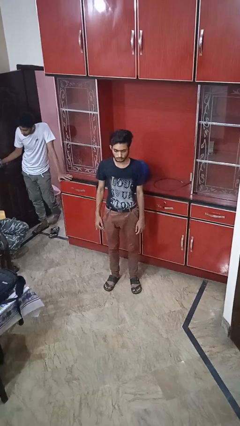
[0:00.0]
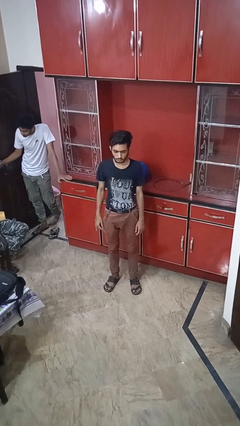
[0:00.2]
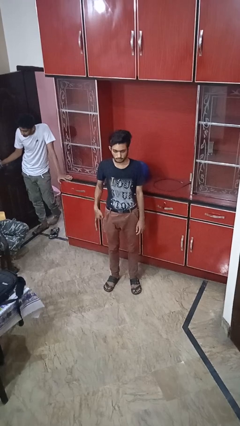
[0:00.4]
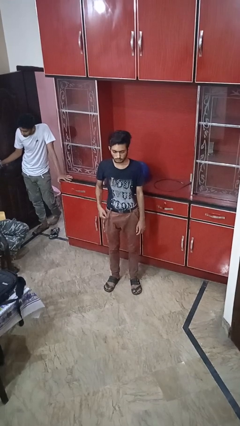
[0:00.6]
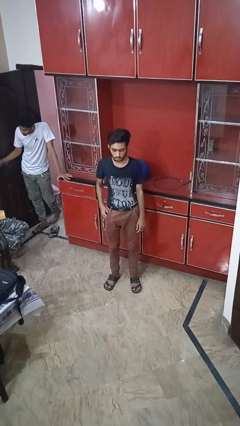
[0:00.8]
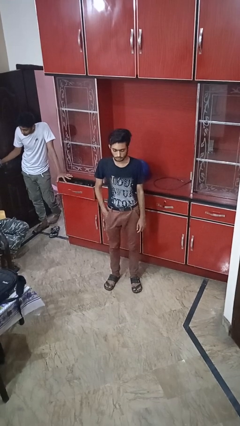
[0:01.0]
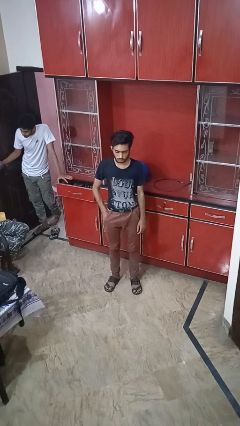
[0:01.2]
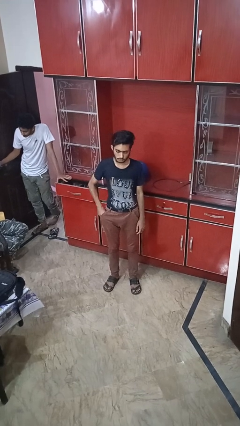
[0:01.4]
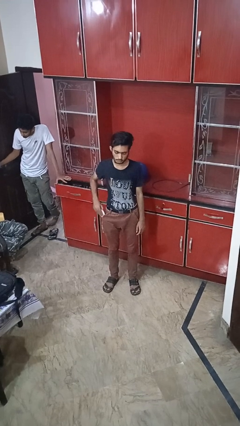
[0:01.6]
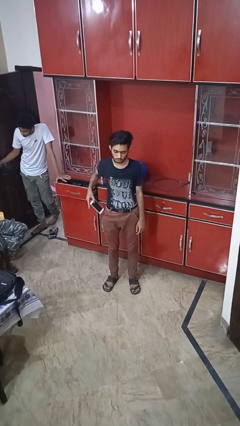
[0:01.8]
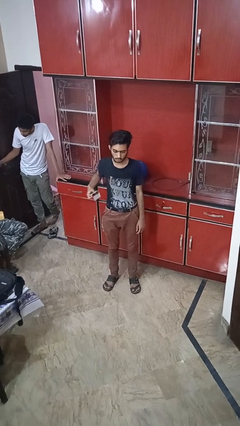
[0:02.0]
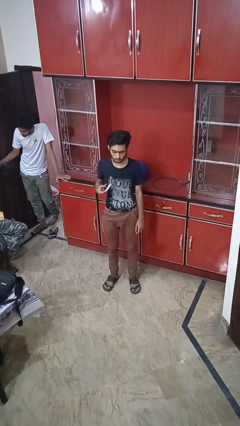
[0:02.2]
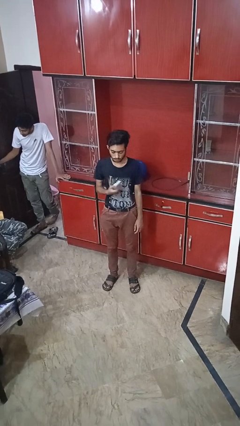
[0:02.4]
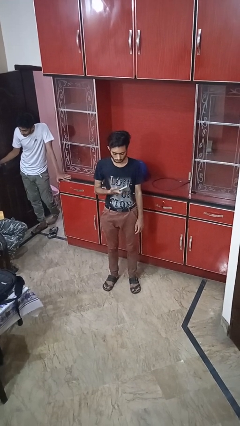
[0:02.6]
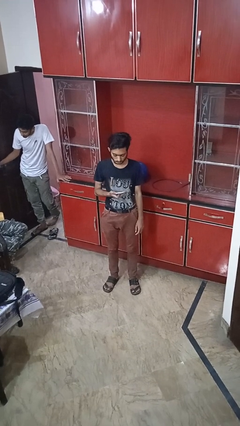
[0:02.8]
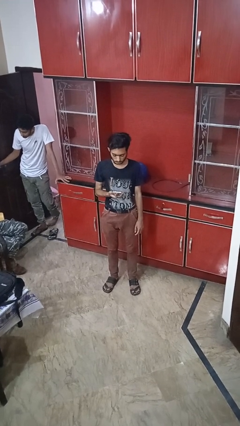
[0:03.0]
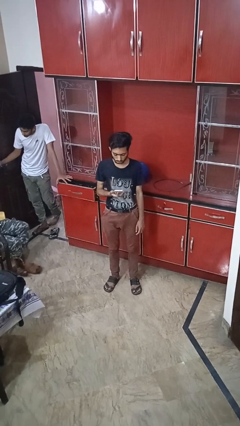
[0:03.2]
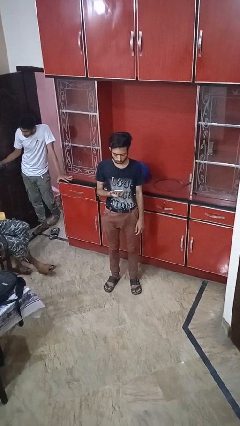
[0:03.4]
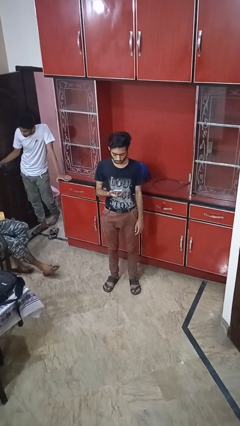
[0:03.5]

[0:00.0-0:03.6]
person takes phone from pocket

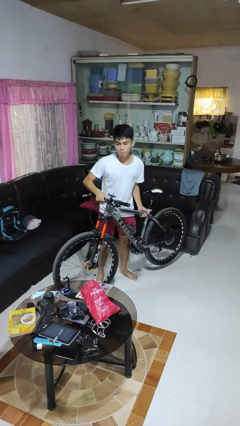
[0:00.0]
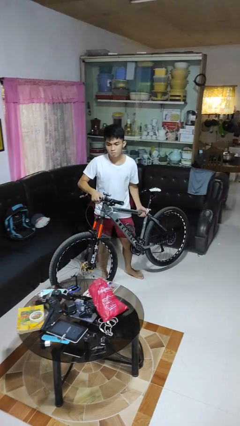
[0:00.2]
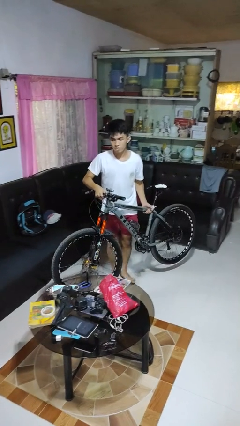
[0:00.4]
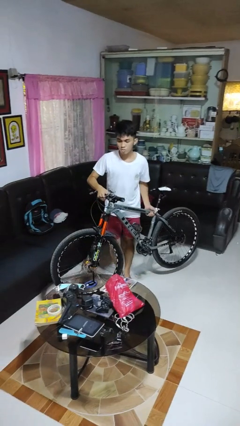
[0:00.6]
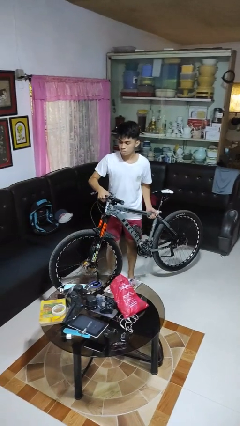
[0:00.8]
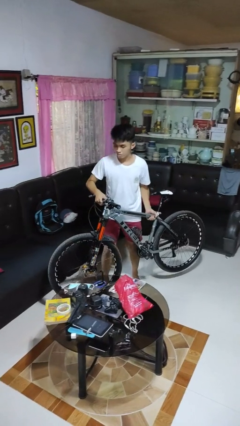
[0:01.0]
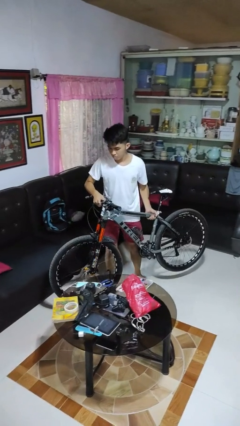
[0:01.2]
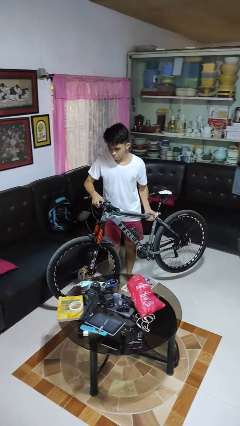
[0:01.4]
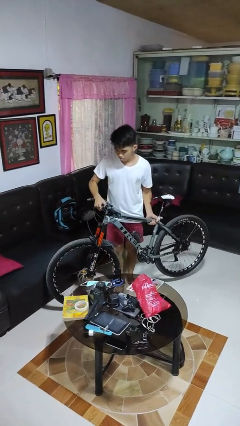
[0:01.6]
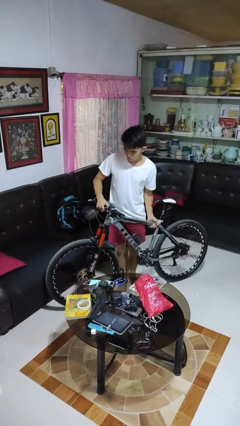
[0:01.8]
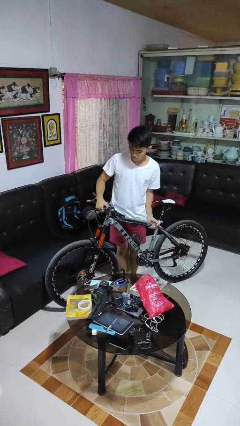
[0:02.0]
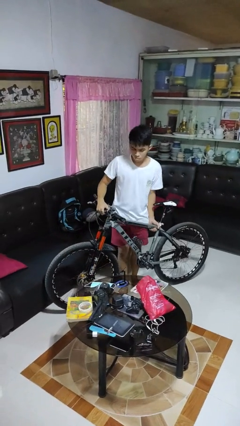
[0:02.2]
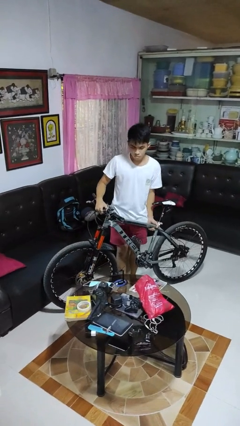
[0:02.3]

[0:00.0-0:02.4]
person carries bicycle

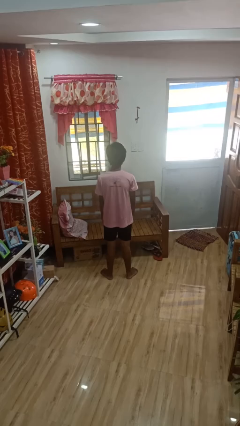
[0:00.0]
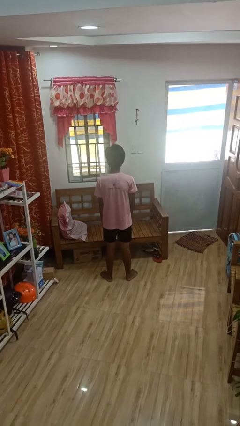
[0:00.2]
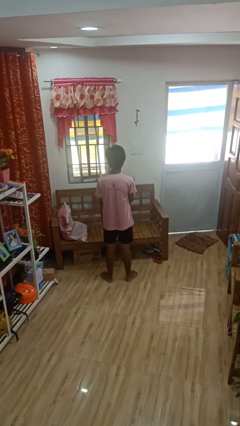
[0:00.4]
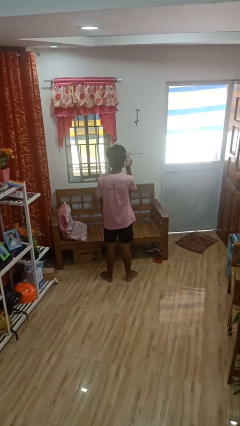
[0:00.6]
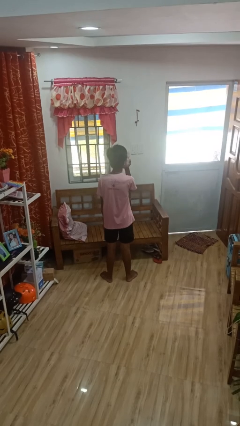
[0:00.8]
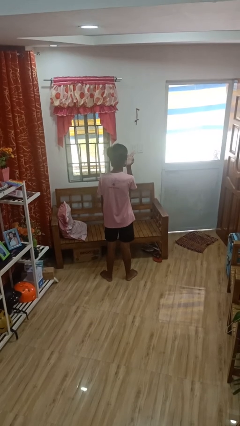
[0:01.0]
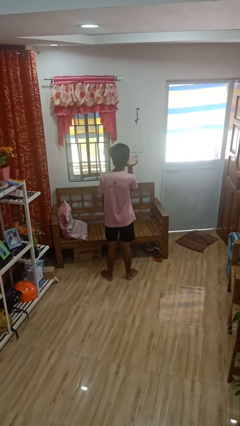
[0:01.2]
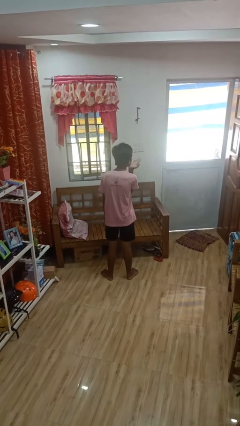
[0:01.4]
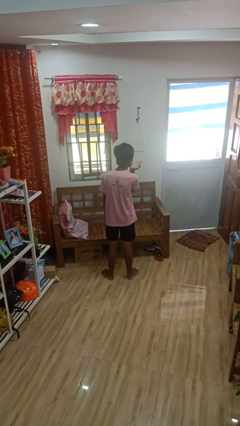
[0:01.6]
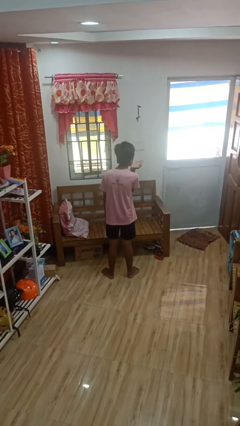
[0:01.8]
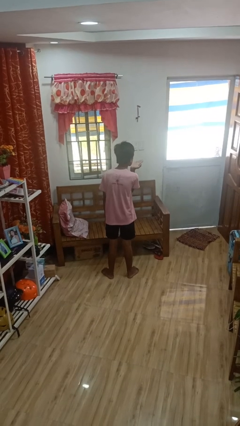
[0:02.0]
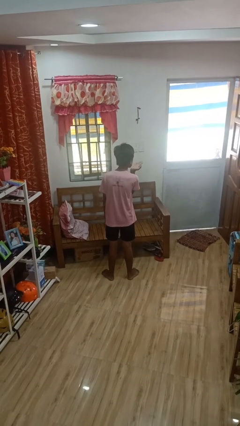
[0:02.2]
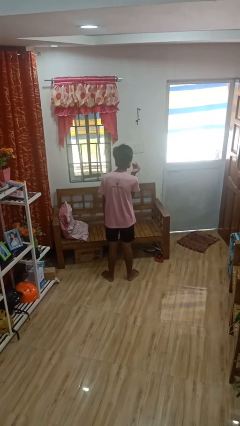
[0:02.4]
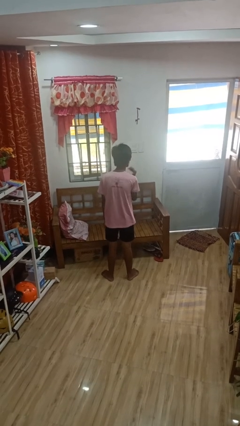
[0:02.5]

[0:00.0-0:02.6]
person gestures blow kiss

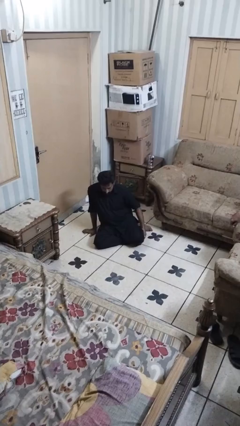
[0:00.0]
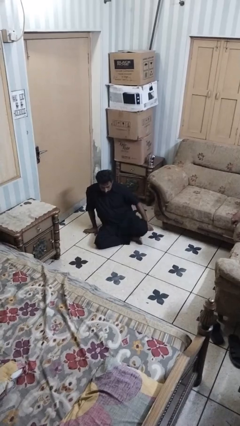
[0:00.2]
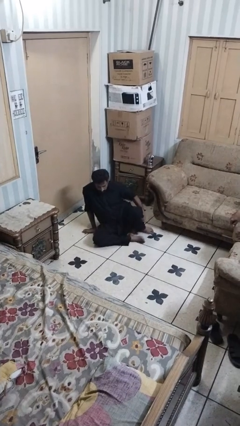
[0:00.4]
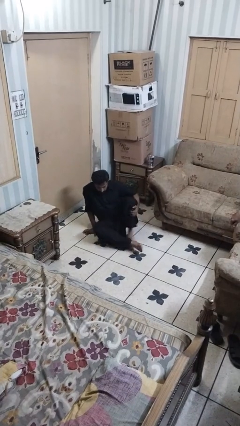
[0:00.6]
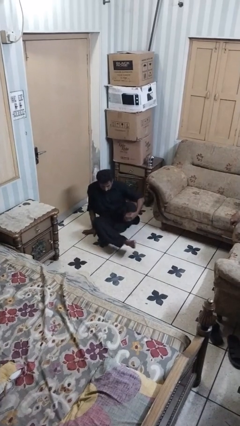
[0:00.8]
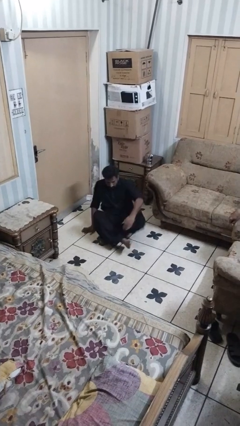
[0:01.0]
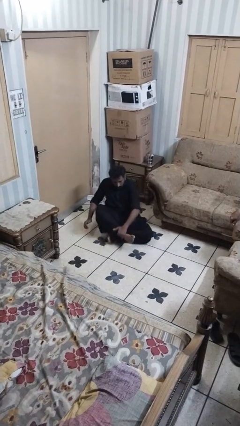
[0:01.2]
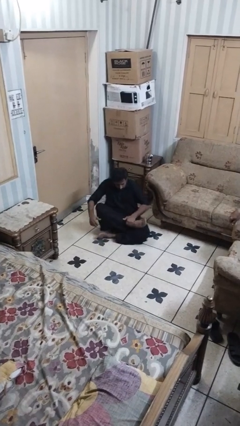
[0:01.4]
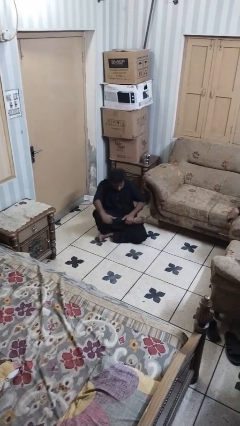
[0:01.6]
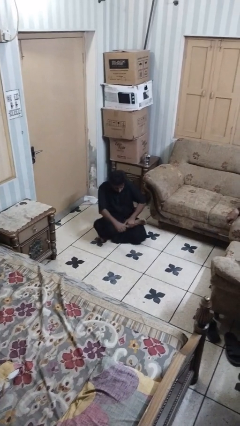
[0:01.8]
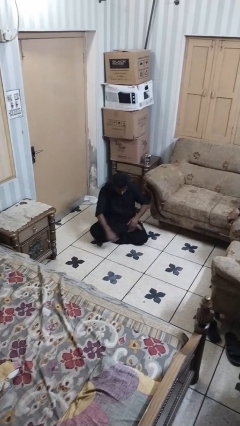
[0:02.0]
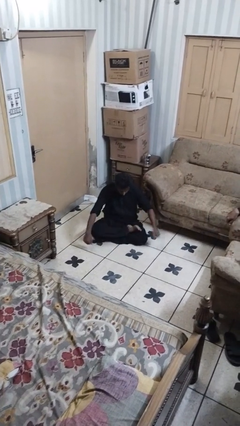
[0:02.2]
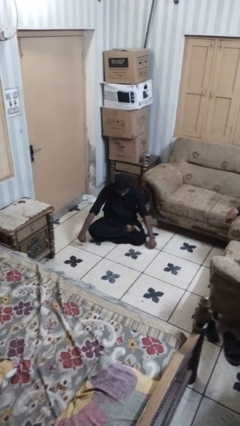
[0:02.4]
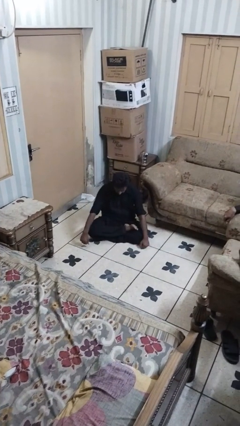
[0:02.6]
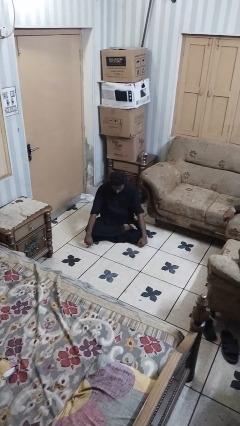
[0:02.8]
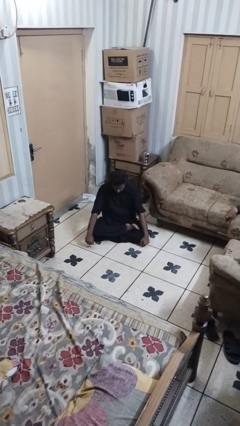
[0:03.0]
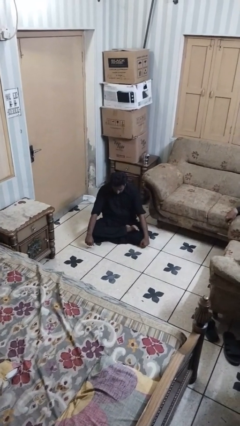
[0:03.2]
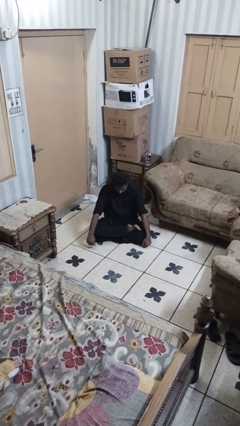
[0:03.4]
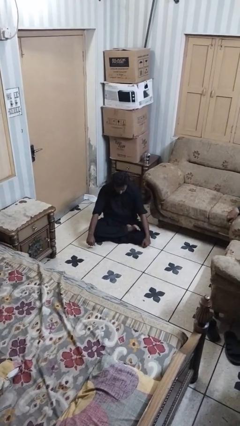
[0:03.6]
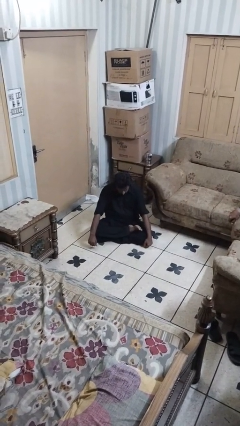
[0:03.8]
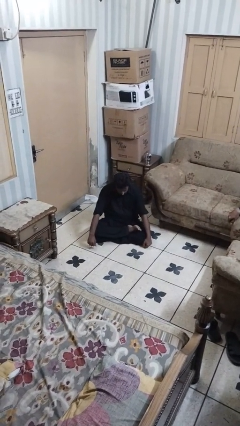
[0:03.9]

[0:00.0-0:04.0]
person crosses legs

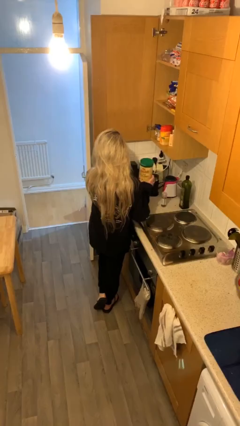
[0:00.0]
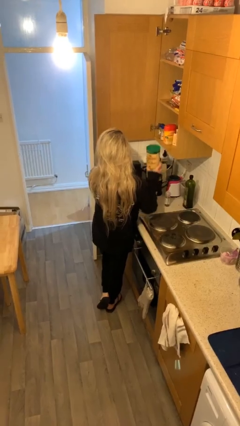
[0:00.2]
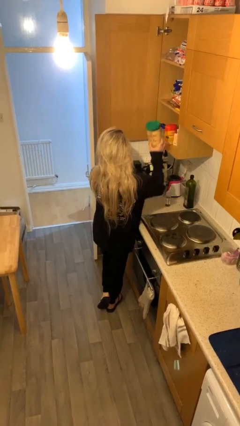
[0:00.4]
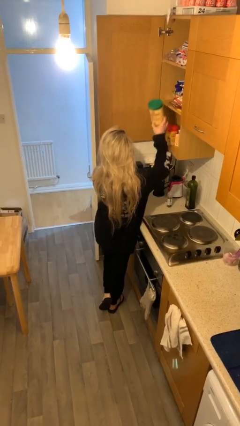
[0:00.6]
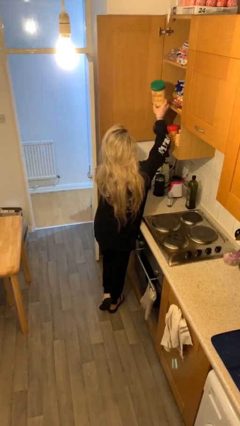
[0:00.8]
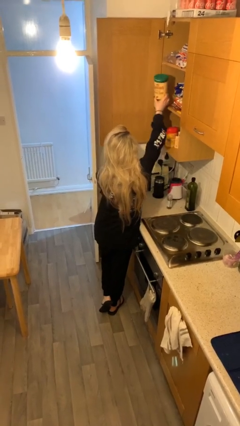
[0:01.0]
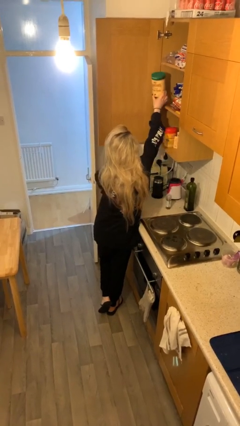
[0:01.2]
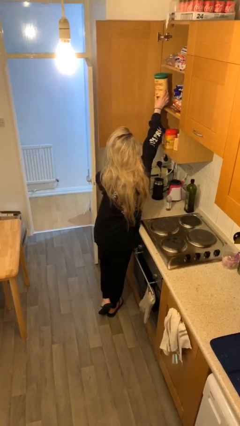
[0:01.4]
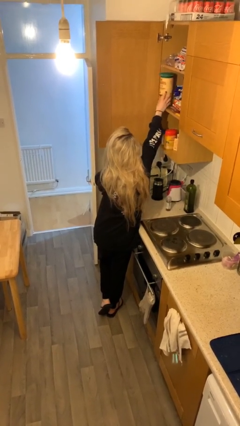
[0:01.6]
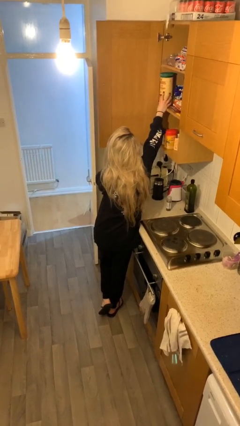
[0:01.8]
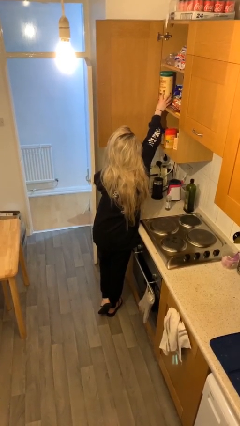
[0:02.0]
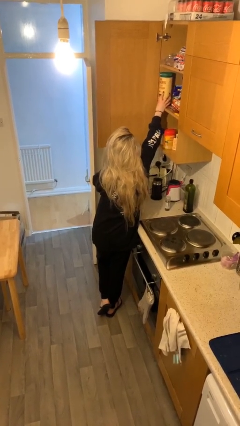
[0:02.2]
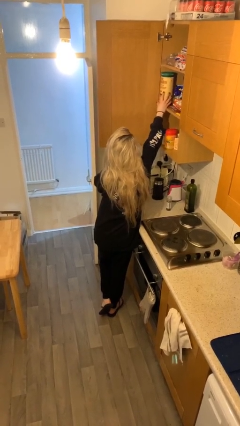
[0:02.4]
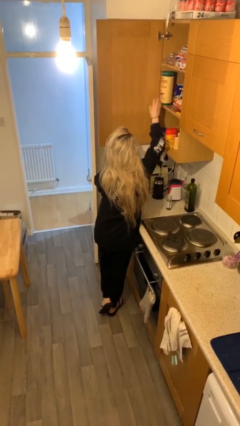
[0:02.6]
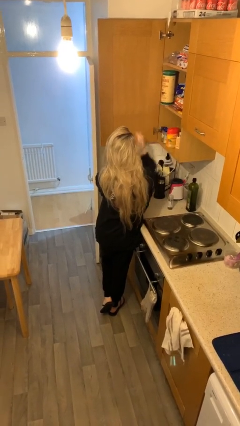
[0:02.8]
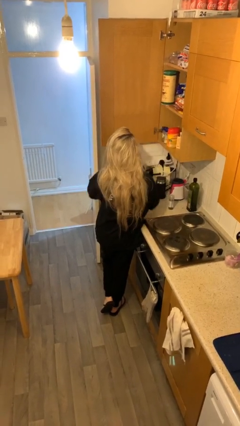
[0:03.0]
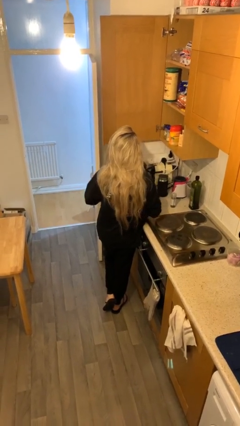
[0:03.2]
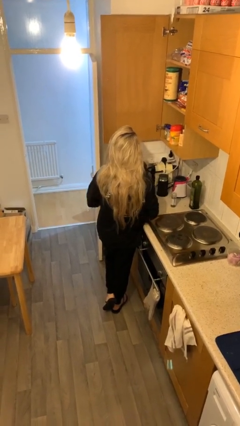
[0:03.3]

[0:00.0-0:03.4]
person puts down object on shelf

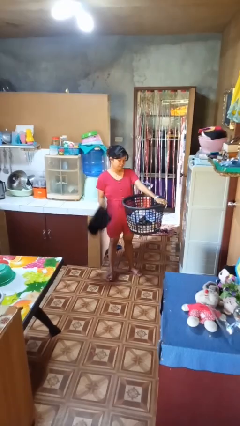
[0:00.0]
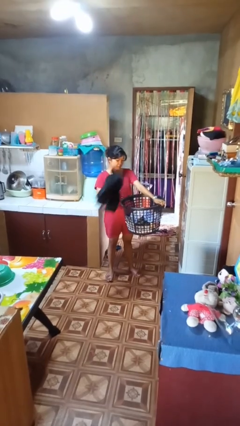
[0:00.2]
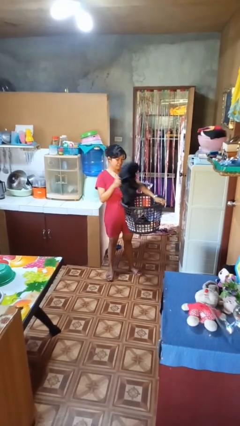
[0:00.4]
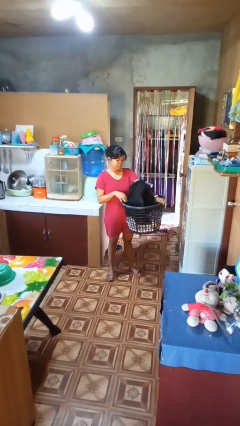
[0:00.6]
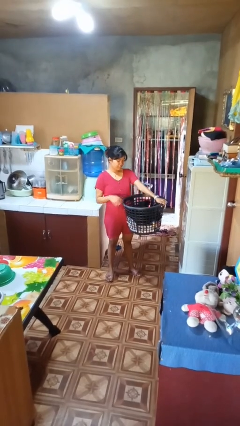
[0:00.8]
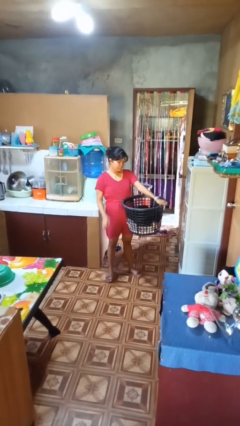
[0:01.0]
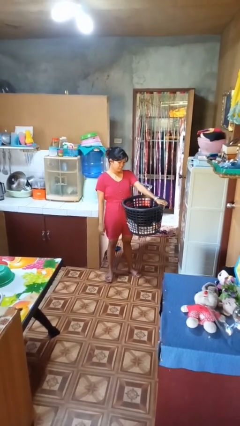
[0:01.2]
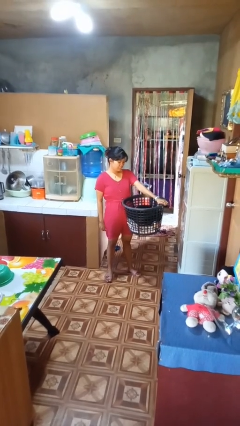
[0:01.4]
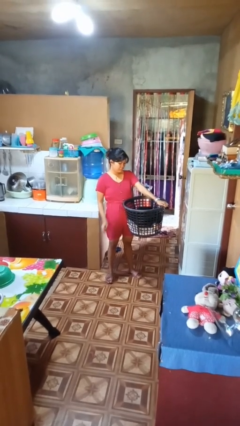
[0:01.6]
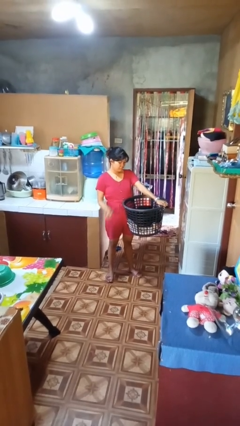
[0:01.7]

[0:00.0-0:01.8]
person puts object into basket
